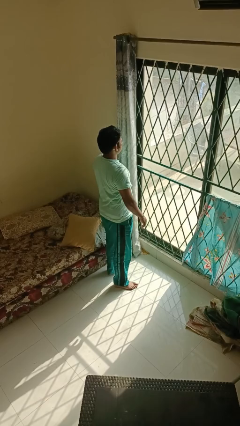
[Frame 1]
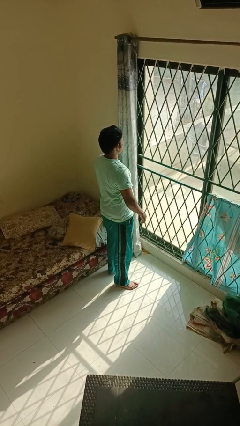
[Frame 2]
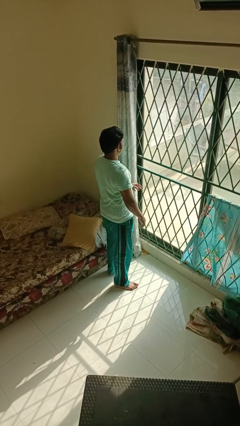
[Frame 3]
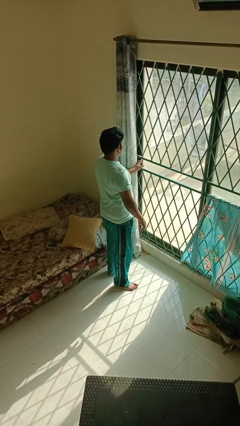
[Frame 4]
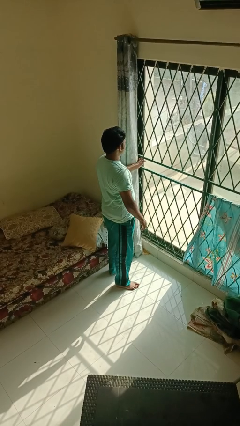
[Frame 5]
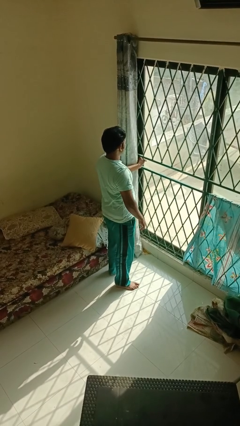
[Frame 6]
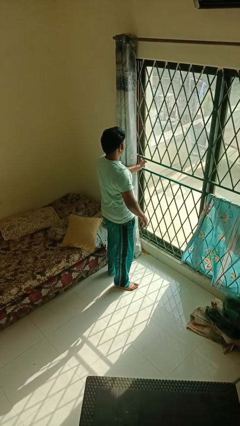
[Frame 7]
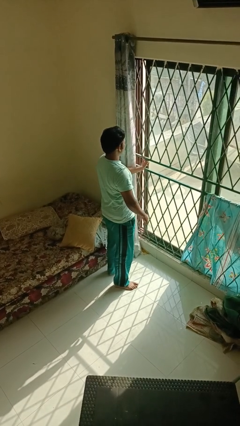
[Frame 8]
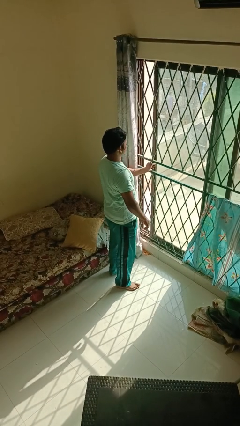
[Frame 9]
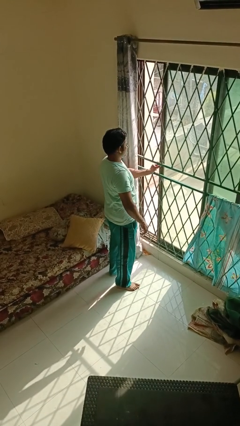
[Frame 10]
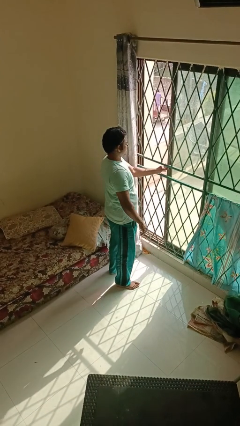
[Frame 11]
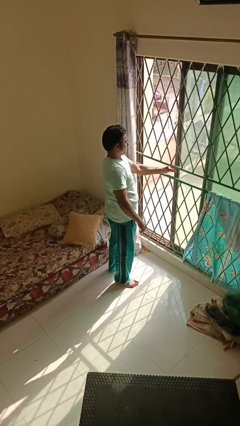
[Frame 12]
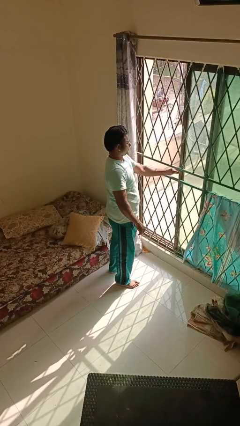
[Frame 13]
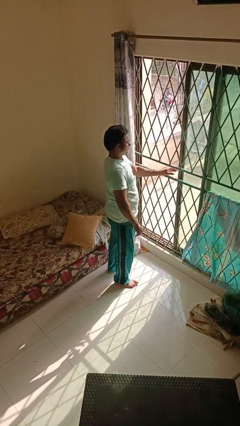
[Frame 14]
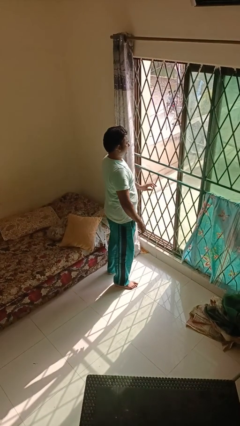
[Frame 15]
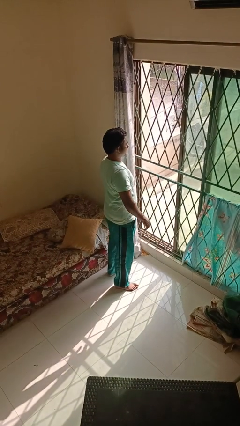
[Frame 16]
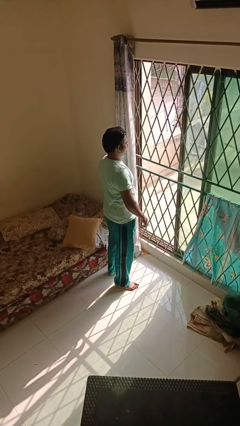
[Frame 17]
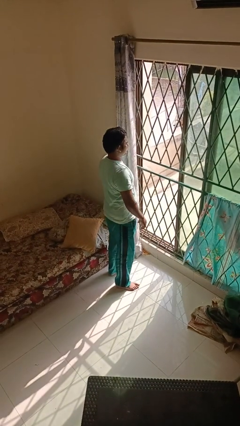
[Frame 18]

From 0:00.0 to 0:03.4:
person opens home window

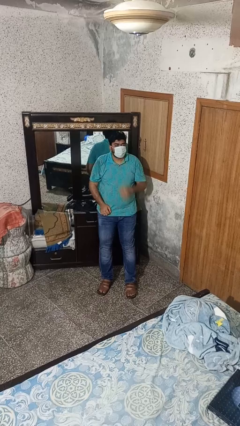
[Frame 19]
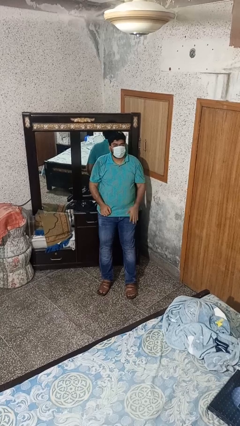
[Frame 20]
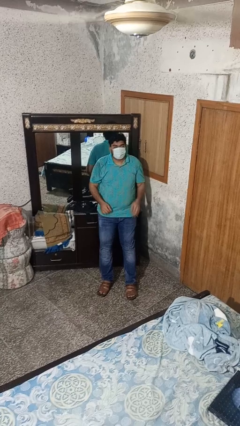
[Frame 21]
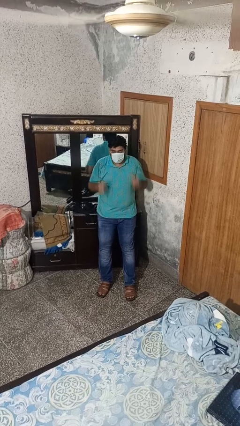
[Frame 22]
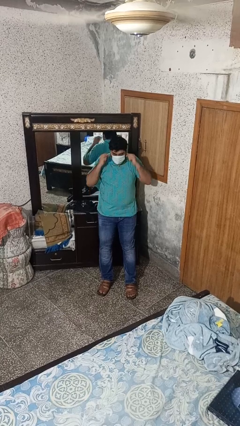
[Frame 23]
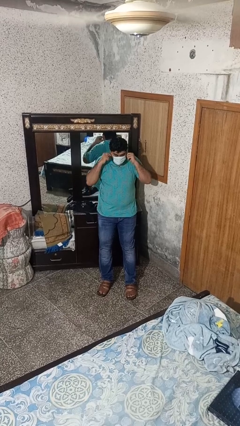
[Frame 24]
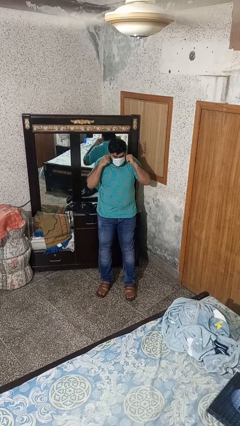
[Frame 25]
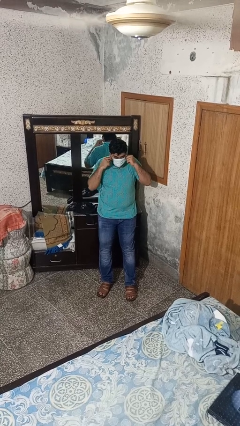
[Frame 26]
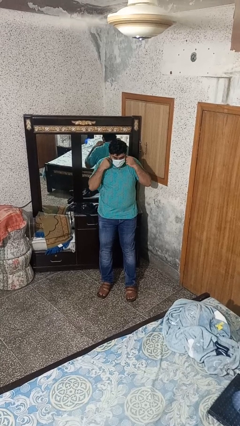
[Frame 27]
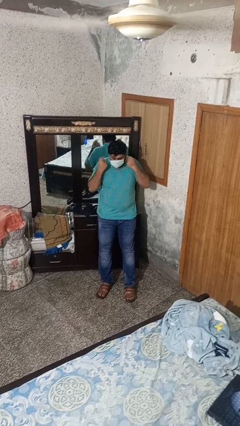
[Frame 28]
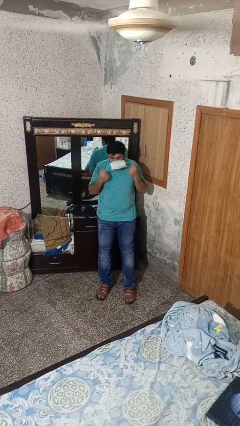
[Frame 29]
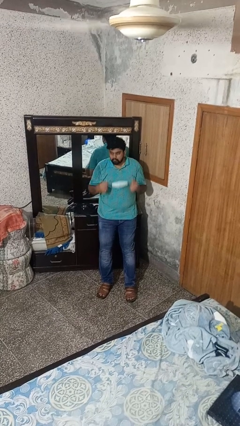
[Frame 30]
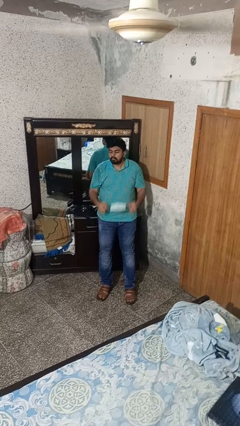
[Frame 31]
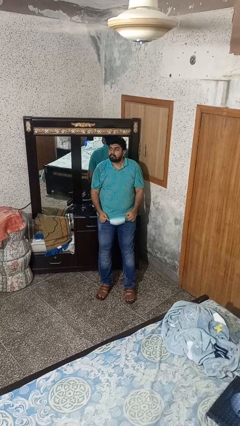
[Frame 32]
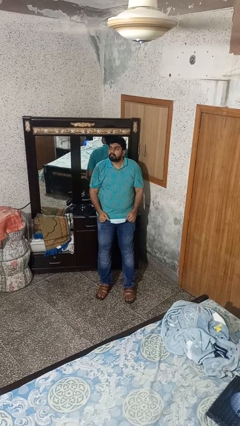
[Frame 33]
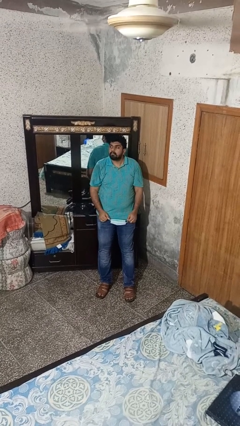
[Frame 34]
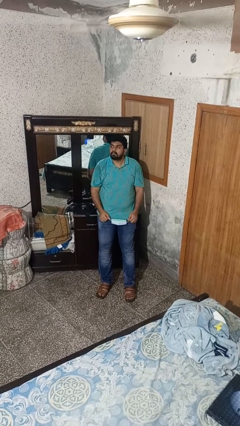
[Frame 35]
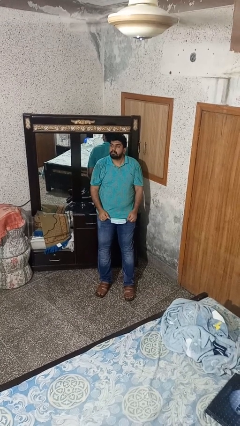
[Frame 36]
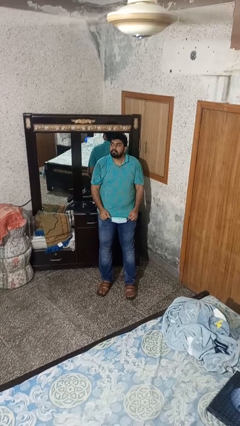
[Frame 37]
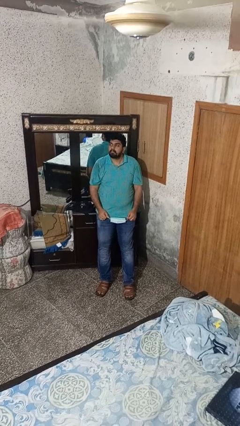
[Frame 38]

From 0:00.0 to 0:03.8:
person takes off facemask

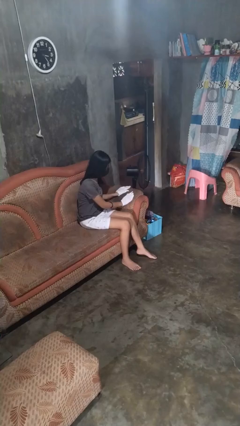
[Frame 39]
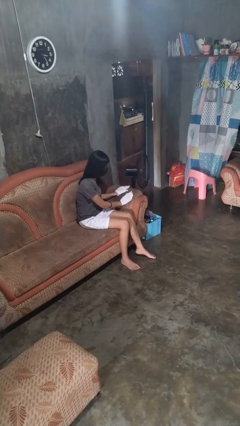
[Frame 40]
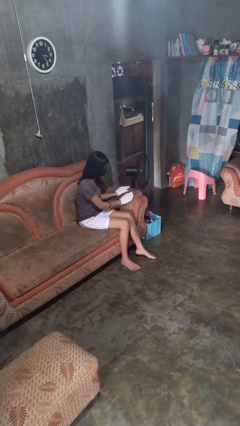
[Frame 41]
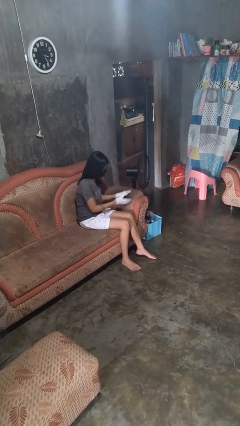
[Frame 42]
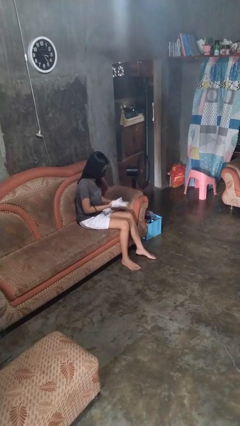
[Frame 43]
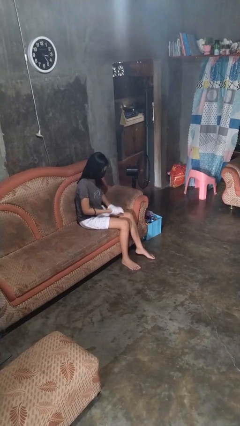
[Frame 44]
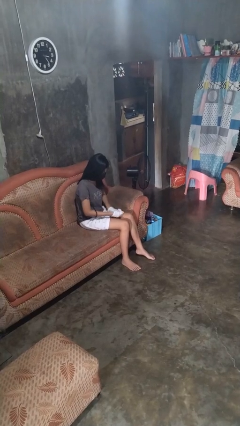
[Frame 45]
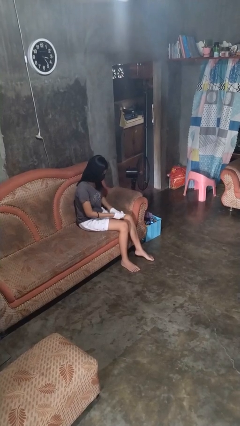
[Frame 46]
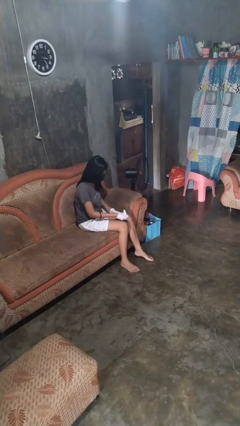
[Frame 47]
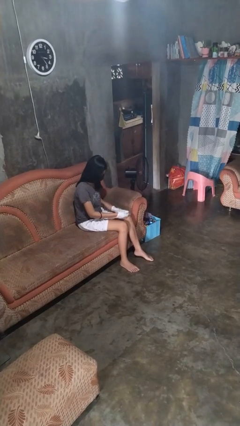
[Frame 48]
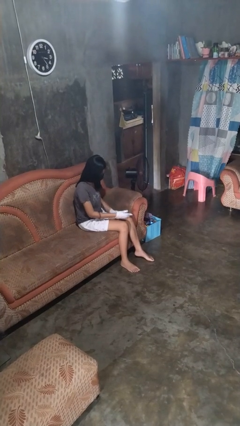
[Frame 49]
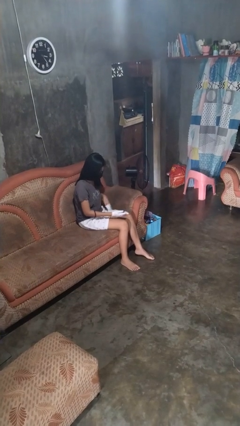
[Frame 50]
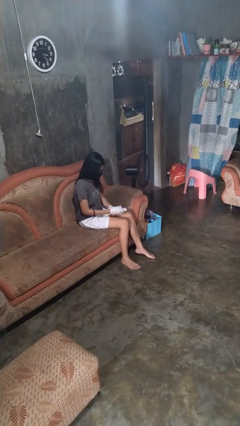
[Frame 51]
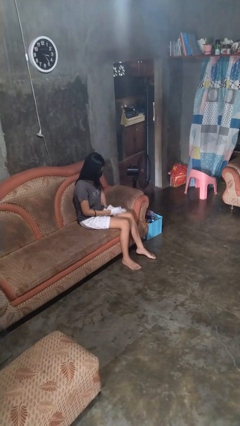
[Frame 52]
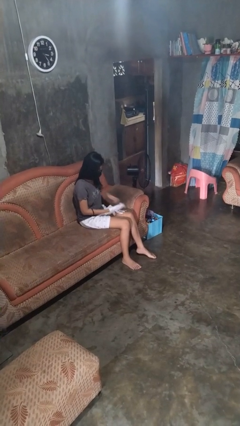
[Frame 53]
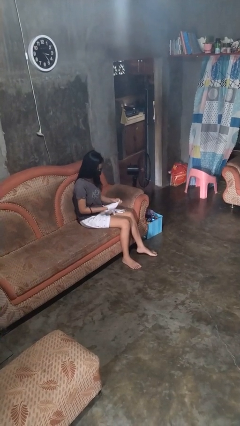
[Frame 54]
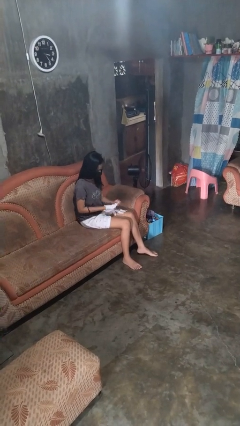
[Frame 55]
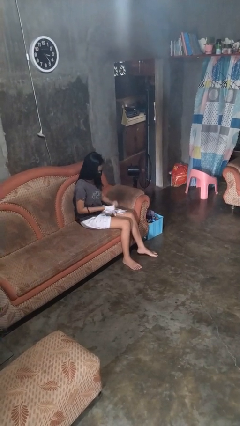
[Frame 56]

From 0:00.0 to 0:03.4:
person takes off gloves

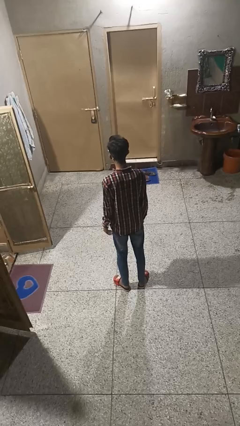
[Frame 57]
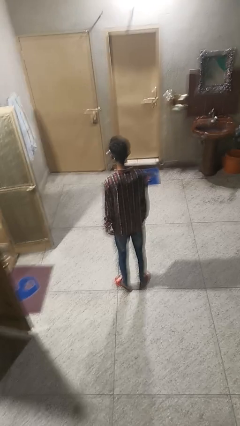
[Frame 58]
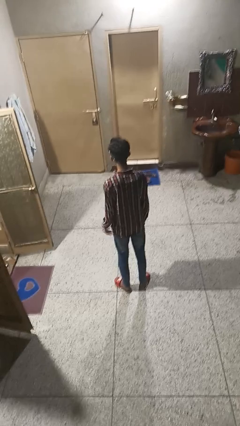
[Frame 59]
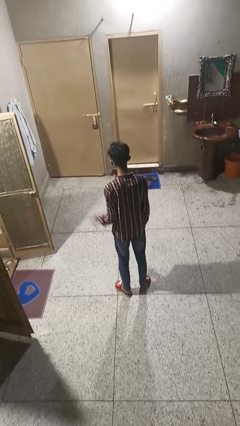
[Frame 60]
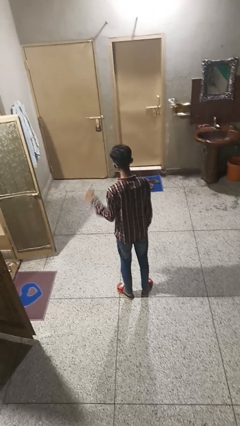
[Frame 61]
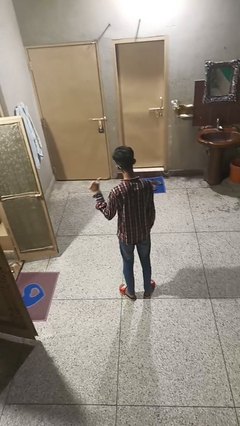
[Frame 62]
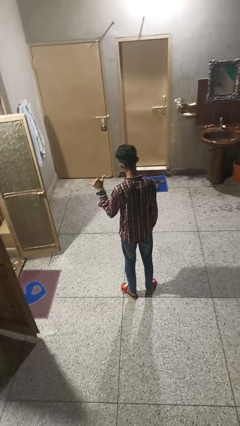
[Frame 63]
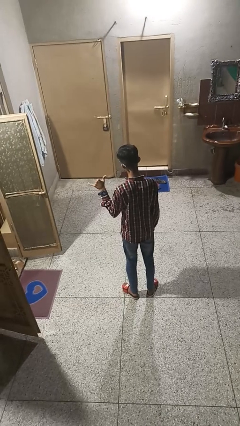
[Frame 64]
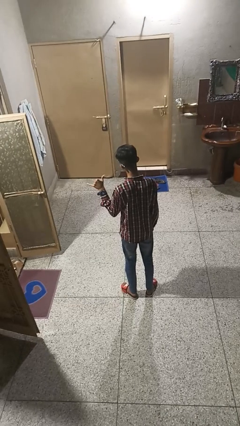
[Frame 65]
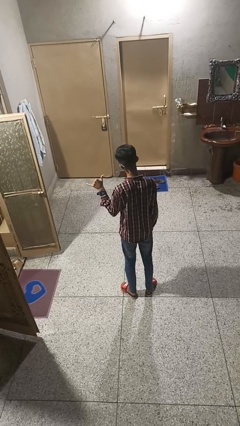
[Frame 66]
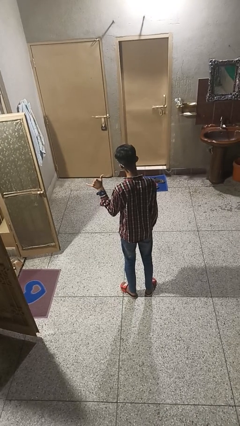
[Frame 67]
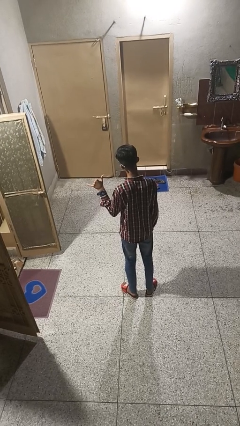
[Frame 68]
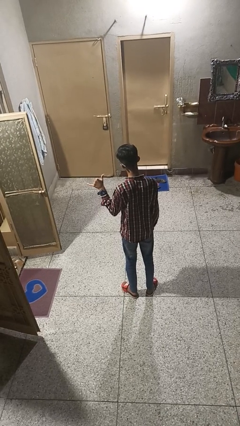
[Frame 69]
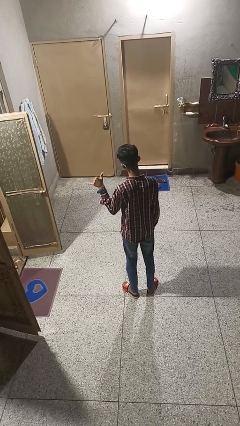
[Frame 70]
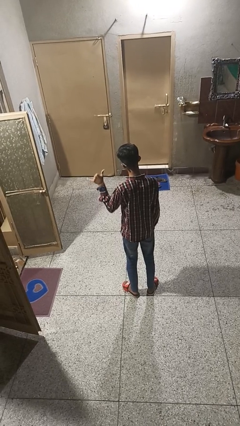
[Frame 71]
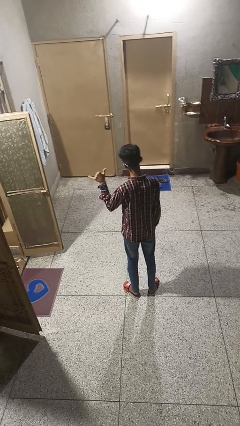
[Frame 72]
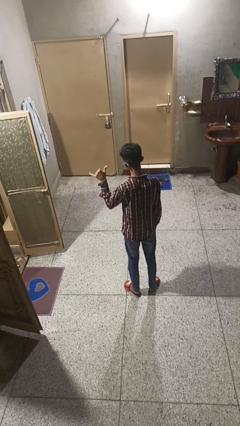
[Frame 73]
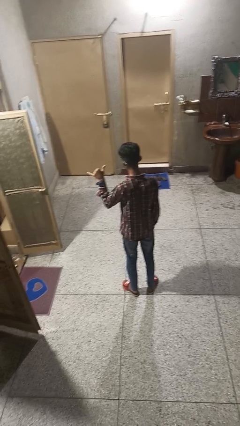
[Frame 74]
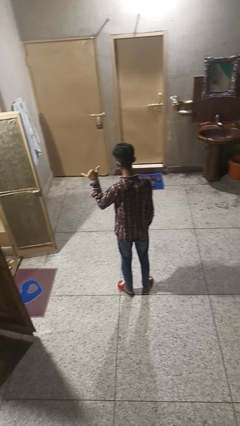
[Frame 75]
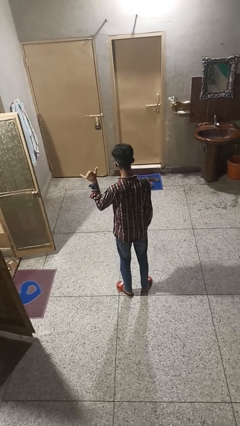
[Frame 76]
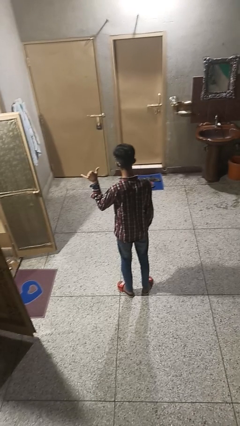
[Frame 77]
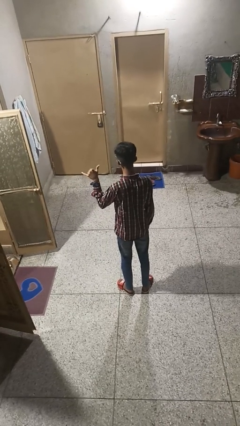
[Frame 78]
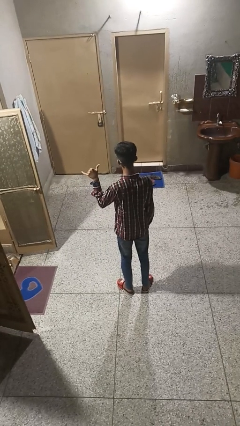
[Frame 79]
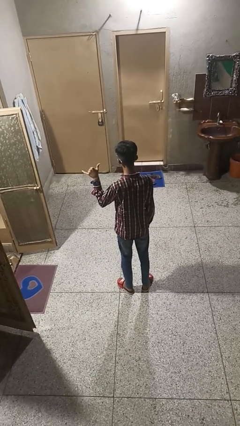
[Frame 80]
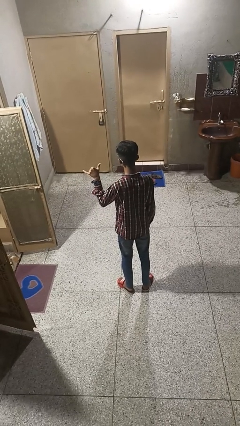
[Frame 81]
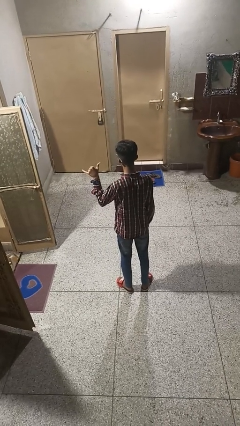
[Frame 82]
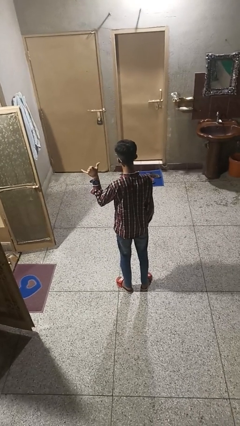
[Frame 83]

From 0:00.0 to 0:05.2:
person gestures hang loose

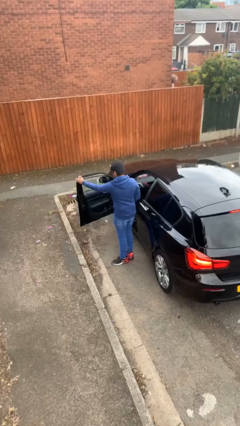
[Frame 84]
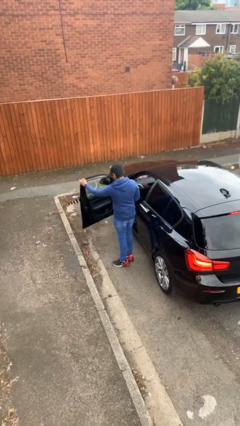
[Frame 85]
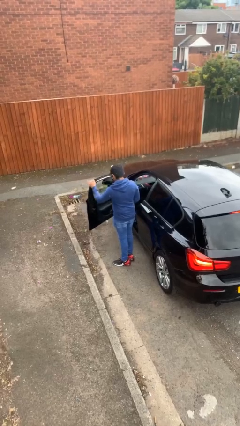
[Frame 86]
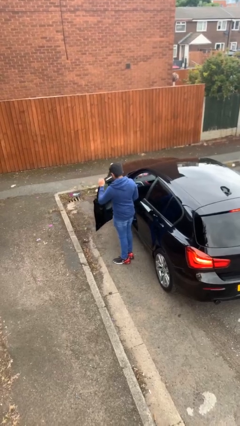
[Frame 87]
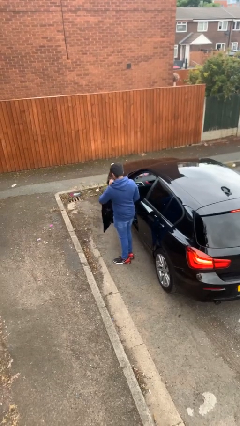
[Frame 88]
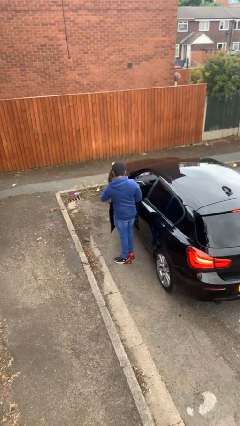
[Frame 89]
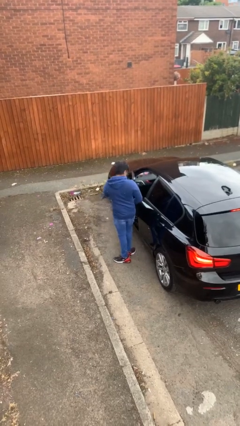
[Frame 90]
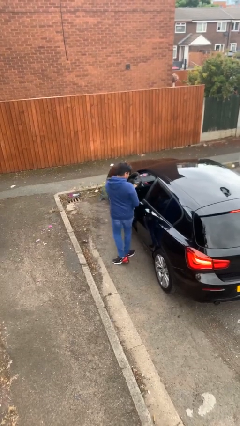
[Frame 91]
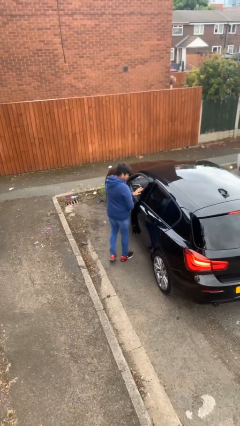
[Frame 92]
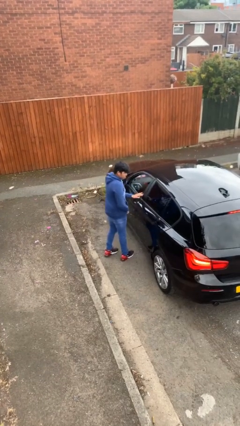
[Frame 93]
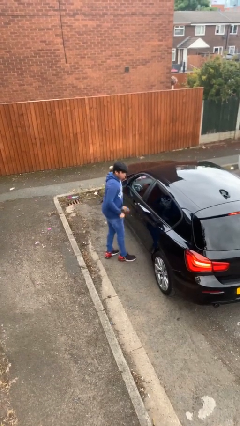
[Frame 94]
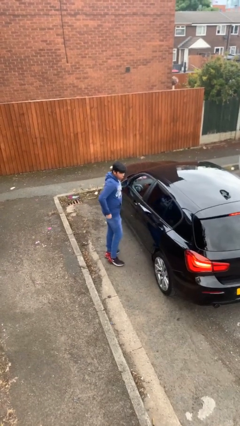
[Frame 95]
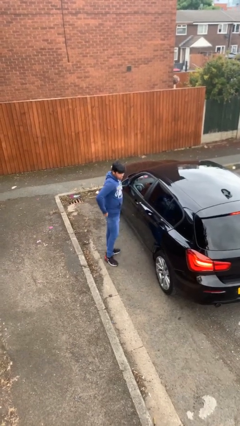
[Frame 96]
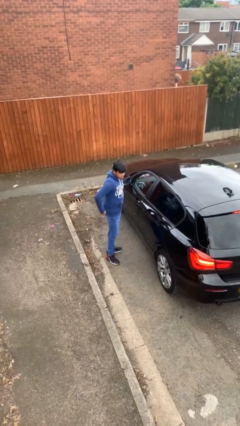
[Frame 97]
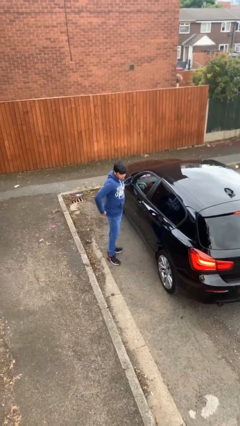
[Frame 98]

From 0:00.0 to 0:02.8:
person closes car door
